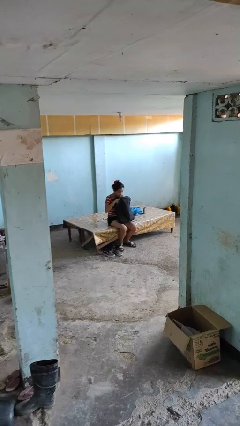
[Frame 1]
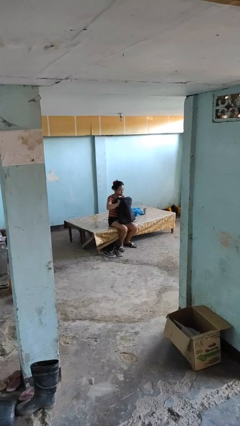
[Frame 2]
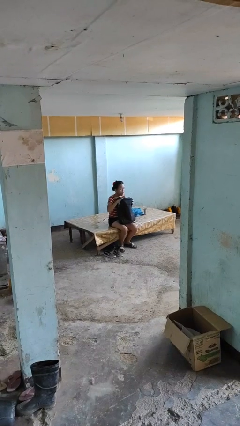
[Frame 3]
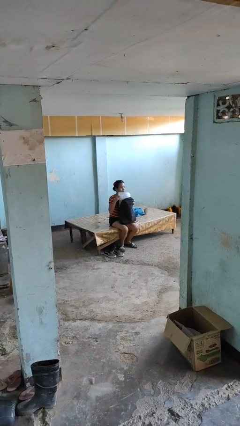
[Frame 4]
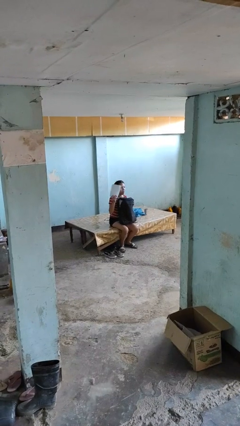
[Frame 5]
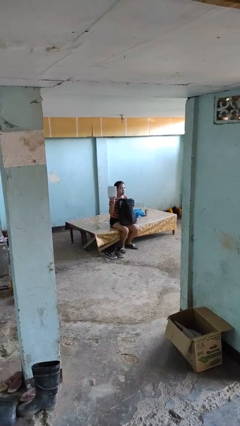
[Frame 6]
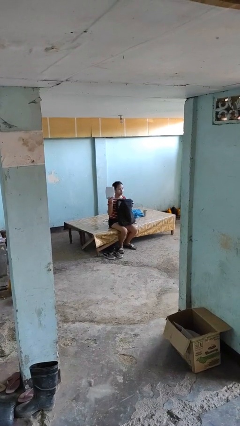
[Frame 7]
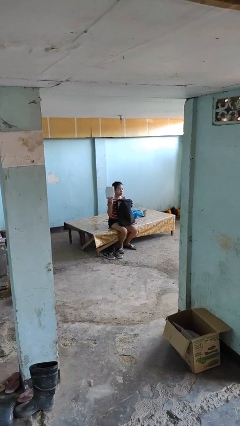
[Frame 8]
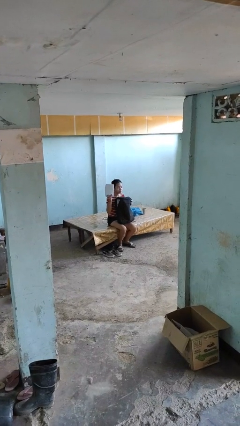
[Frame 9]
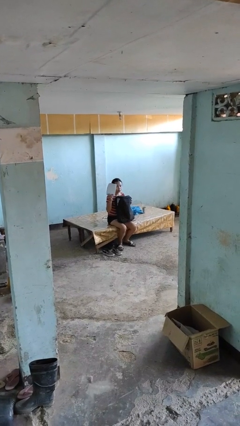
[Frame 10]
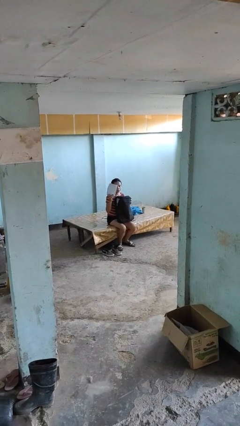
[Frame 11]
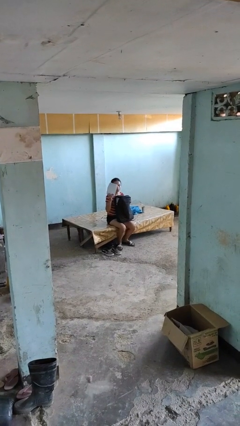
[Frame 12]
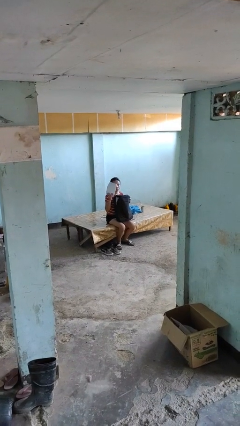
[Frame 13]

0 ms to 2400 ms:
person takes object from backpack

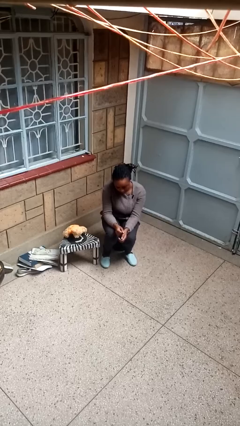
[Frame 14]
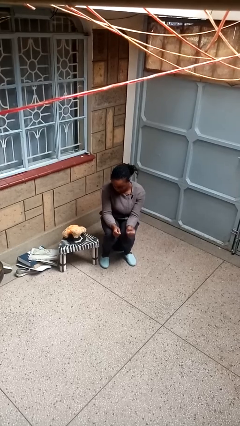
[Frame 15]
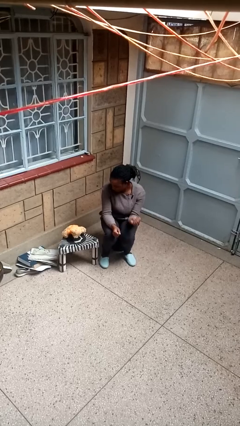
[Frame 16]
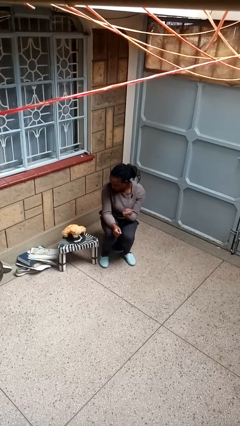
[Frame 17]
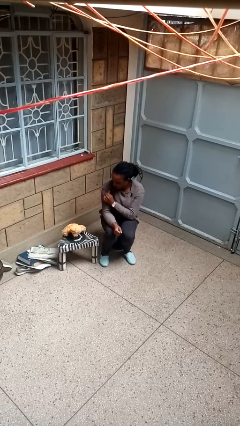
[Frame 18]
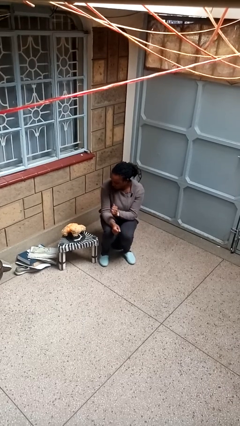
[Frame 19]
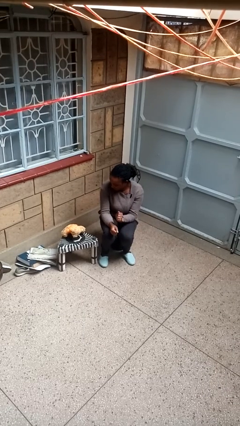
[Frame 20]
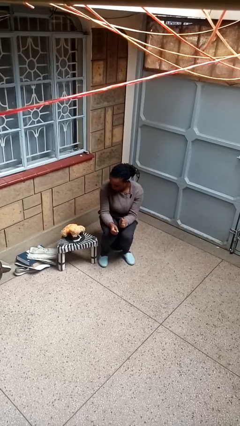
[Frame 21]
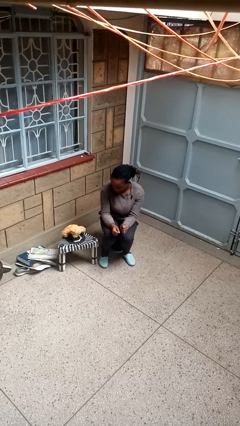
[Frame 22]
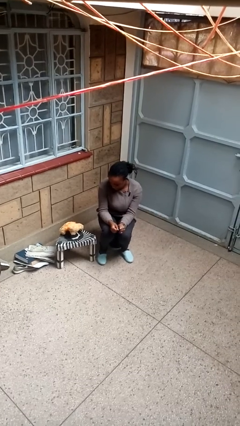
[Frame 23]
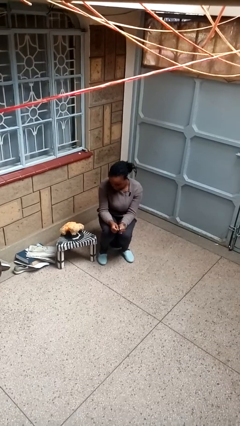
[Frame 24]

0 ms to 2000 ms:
person swats bug

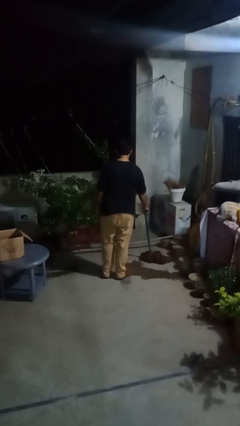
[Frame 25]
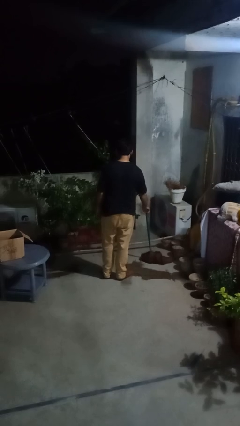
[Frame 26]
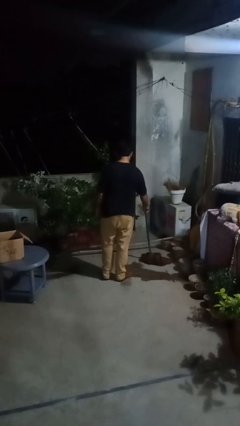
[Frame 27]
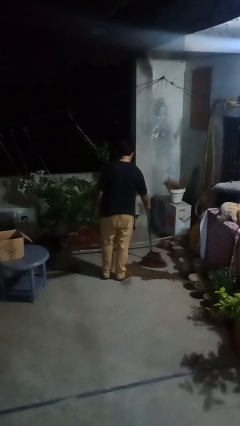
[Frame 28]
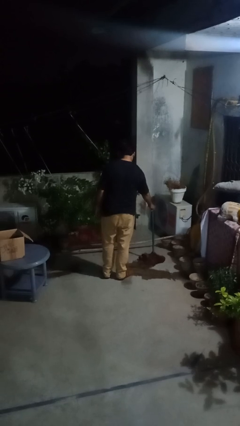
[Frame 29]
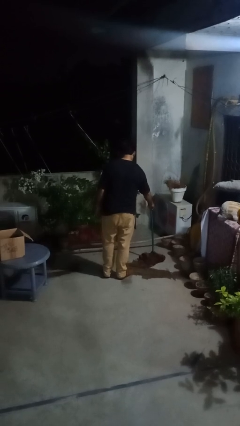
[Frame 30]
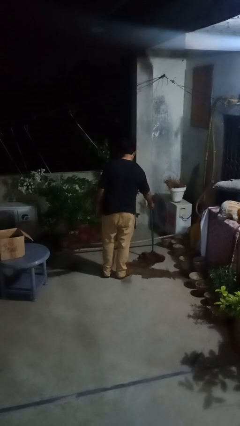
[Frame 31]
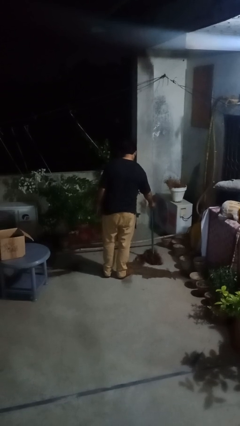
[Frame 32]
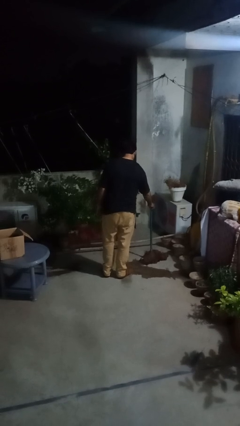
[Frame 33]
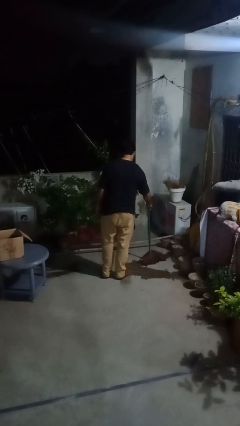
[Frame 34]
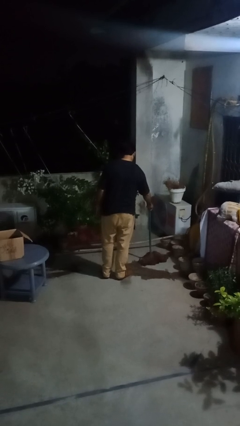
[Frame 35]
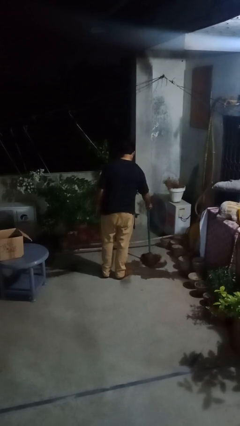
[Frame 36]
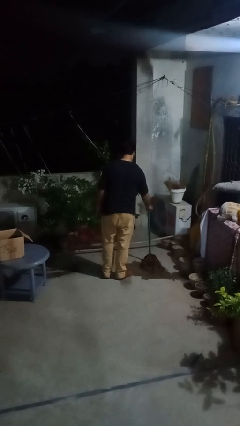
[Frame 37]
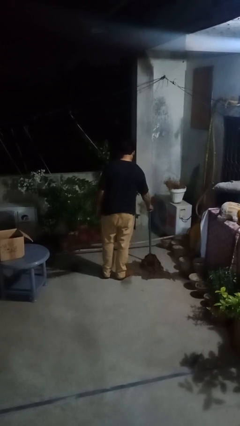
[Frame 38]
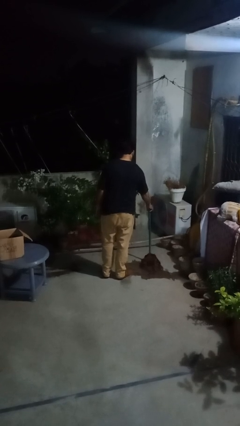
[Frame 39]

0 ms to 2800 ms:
person mops

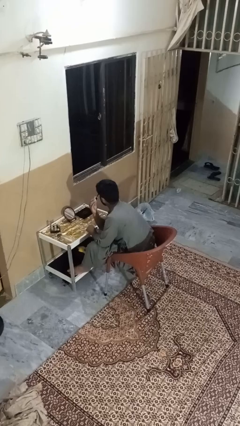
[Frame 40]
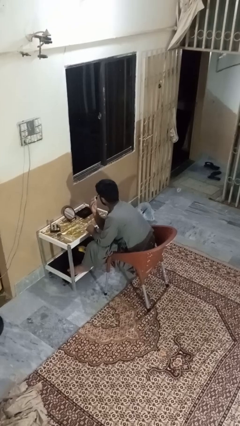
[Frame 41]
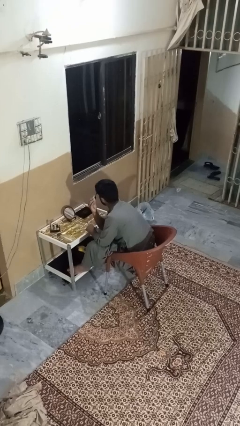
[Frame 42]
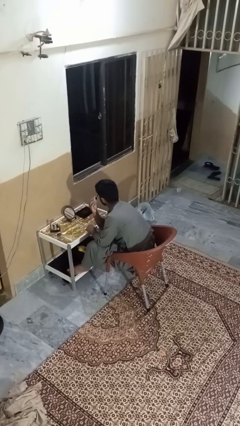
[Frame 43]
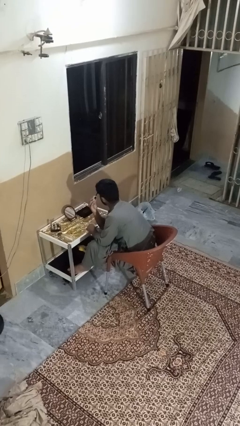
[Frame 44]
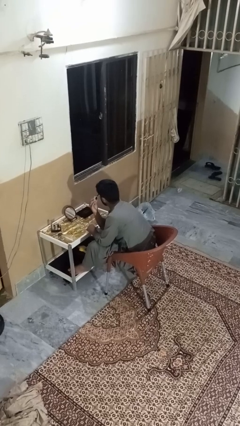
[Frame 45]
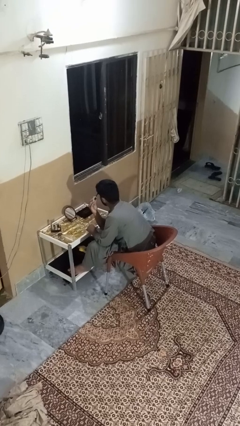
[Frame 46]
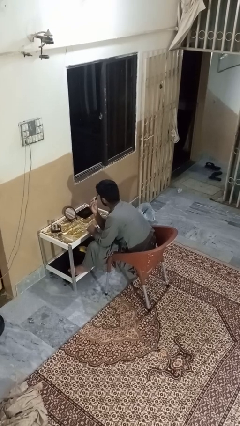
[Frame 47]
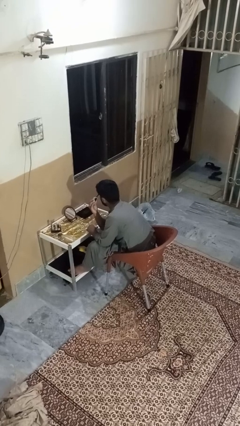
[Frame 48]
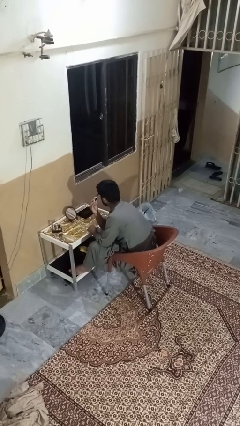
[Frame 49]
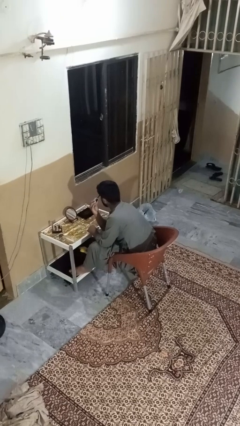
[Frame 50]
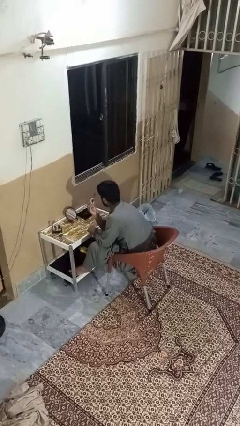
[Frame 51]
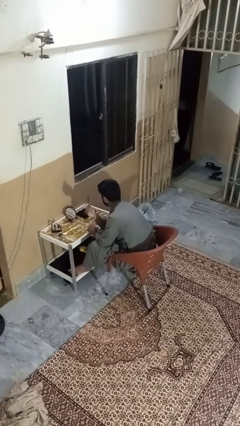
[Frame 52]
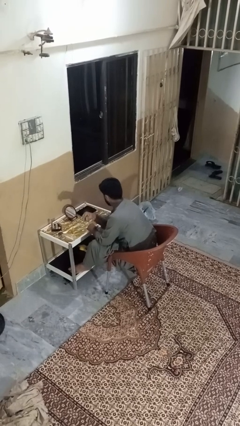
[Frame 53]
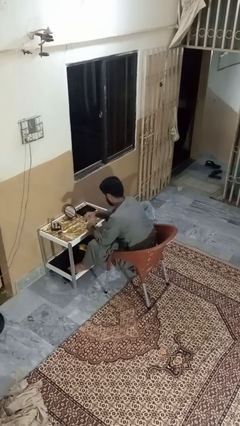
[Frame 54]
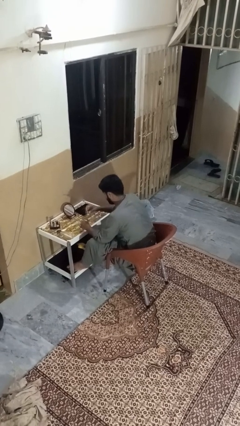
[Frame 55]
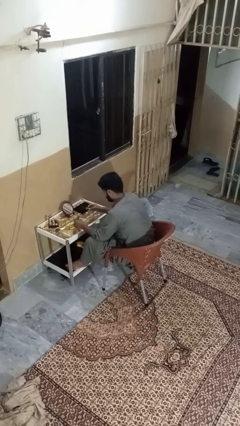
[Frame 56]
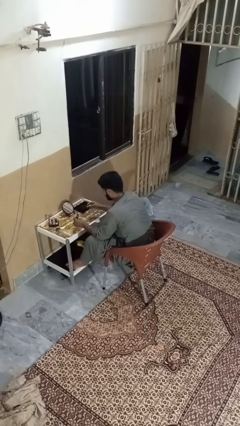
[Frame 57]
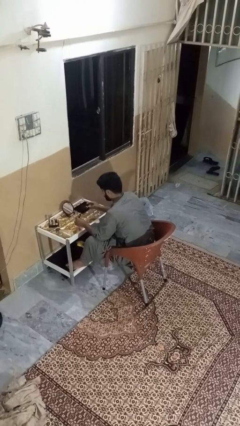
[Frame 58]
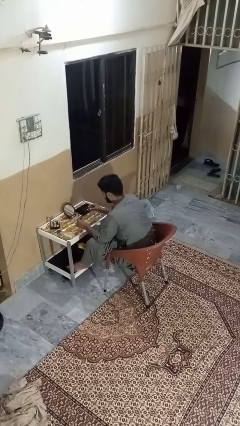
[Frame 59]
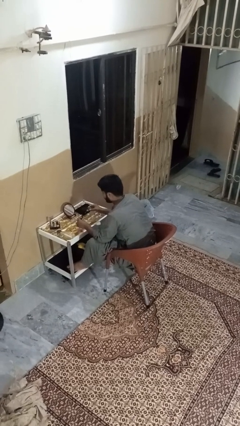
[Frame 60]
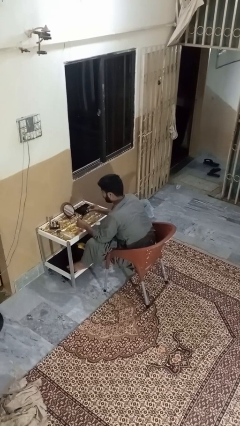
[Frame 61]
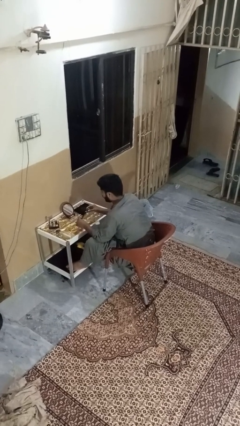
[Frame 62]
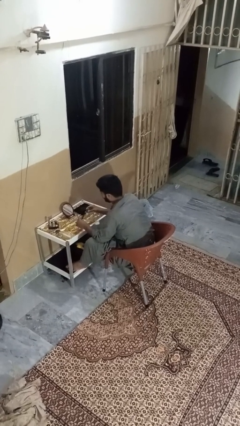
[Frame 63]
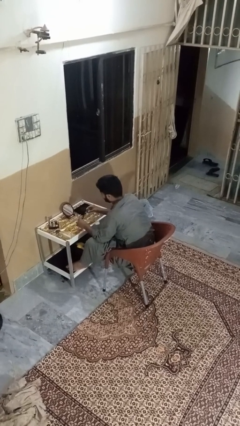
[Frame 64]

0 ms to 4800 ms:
person applies eye makeup

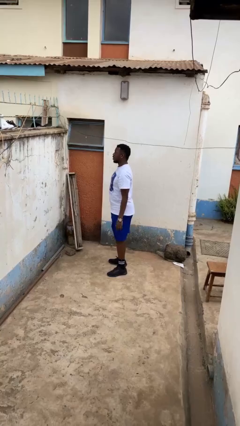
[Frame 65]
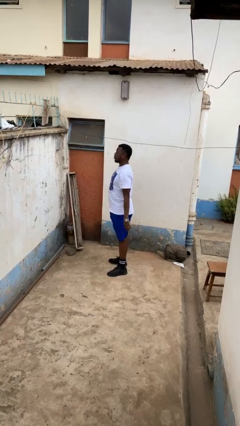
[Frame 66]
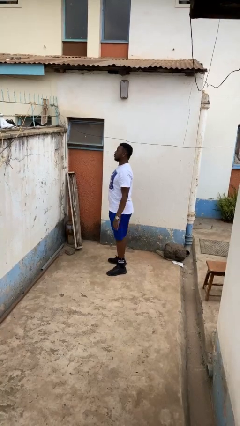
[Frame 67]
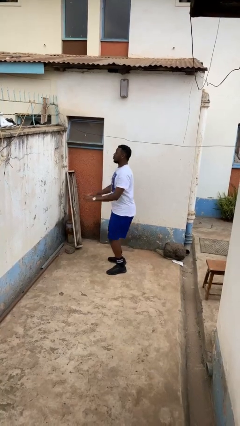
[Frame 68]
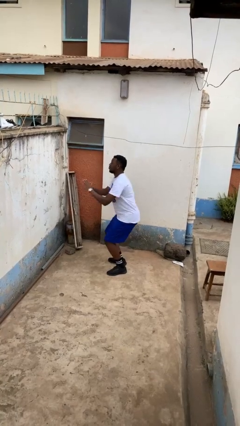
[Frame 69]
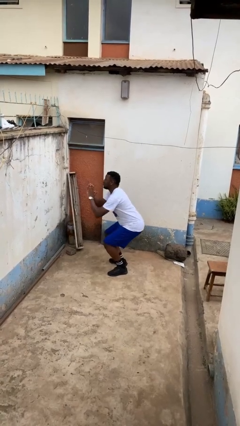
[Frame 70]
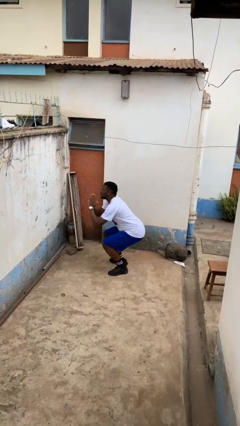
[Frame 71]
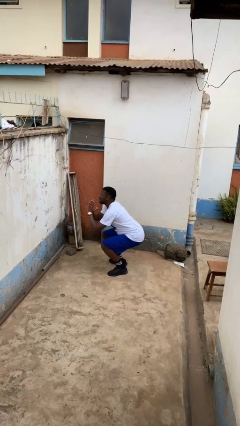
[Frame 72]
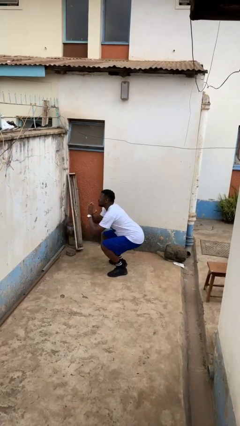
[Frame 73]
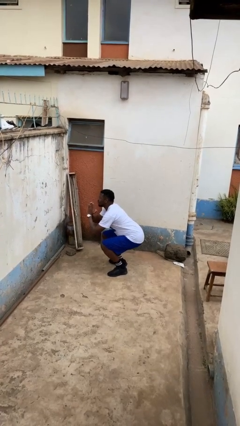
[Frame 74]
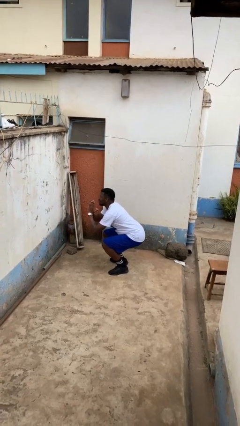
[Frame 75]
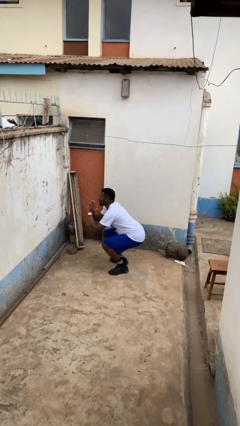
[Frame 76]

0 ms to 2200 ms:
person squats

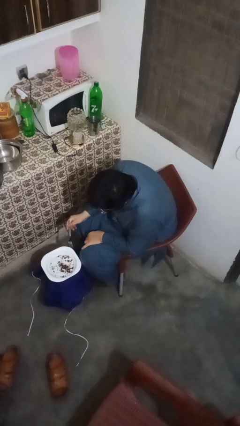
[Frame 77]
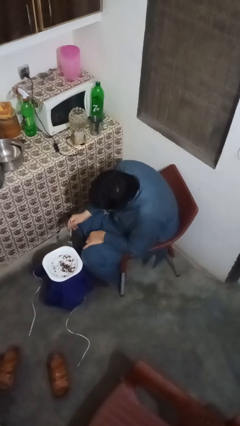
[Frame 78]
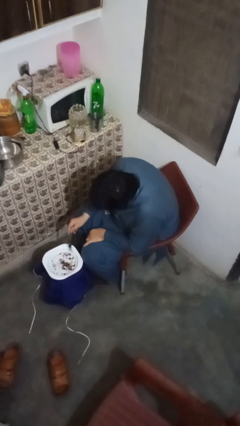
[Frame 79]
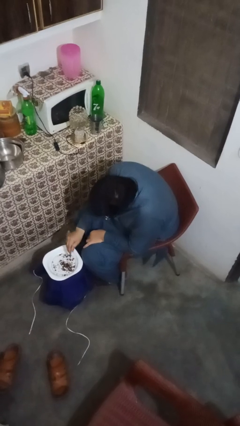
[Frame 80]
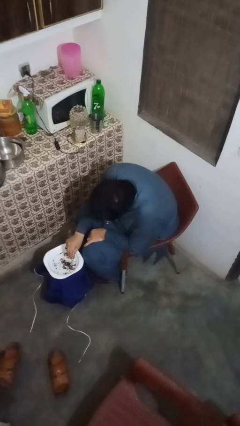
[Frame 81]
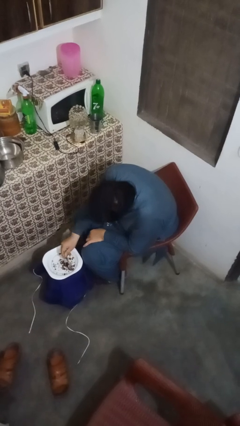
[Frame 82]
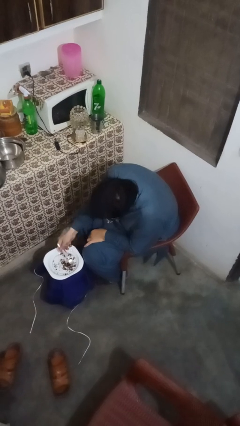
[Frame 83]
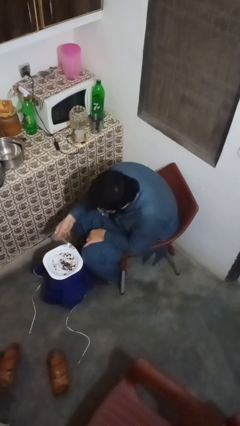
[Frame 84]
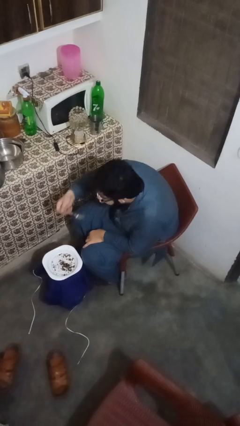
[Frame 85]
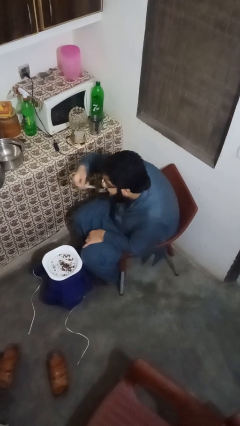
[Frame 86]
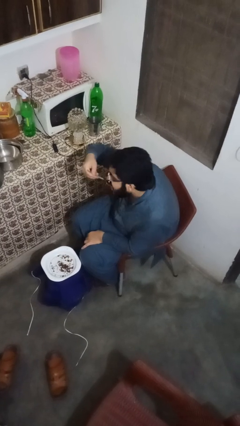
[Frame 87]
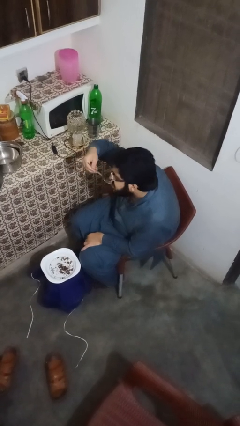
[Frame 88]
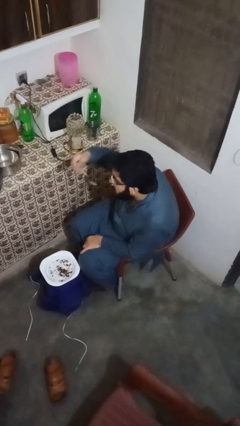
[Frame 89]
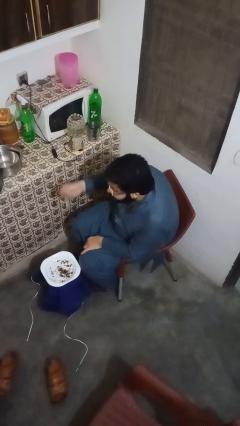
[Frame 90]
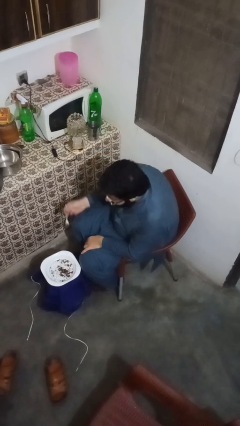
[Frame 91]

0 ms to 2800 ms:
person eats with utensil

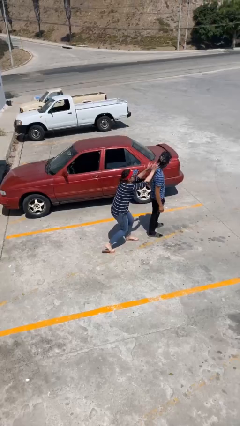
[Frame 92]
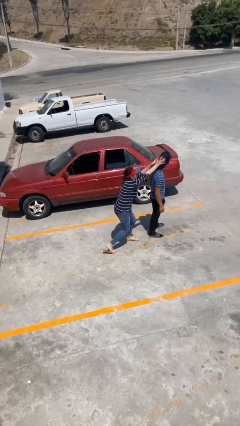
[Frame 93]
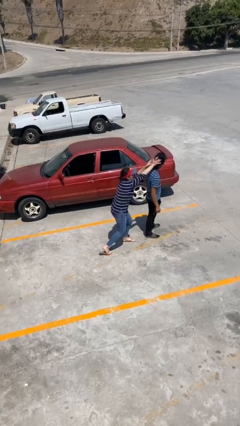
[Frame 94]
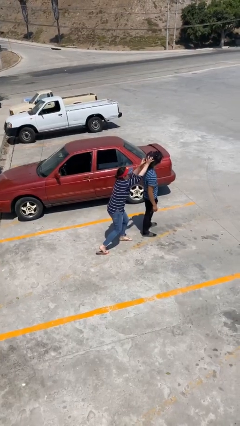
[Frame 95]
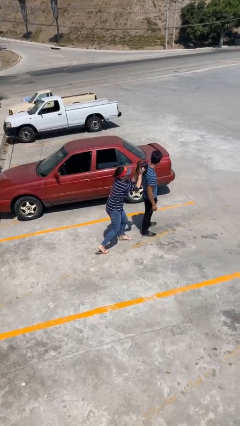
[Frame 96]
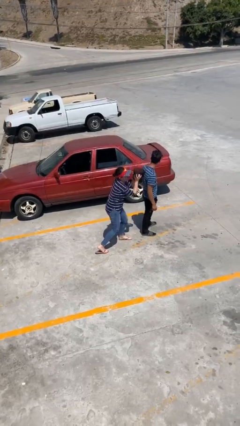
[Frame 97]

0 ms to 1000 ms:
person steals object from person
